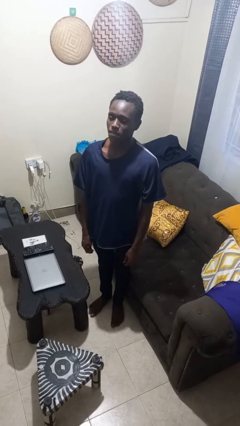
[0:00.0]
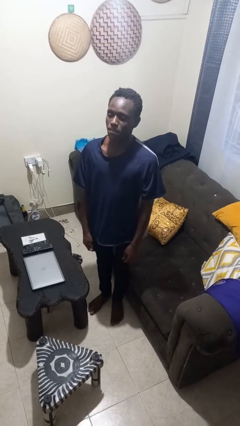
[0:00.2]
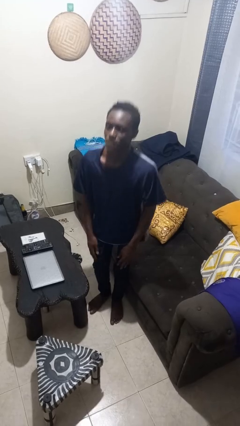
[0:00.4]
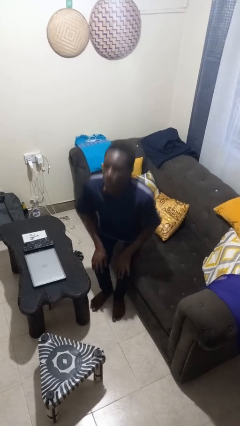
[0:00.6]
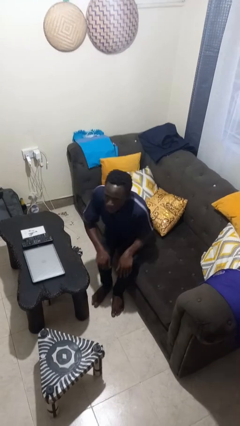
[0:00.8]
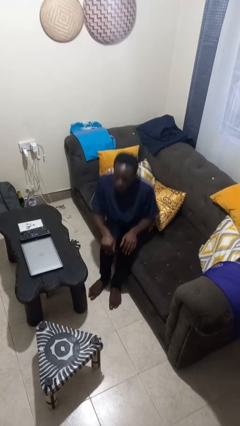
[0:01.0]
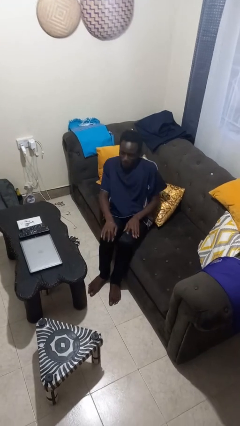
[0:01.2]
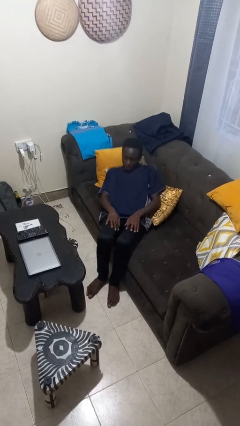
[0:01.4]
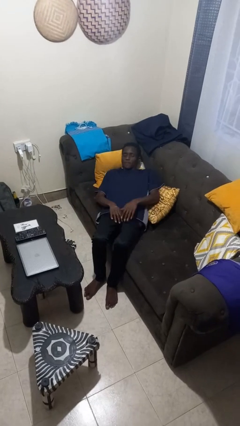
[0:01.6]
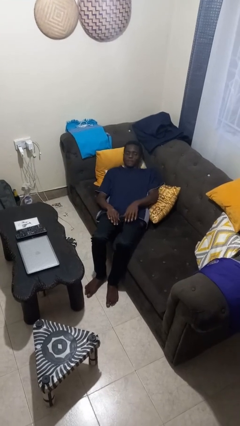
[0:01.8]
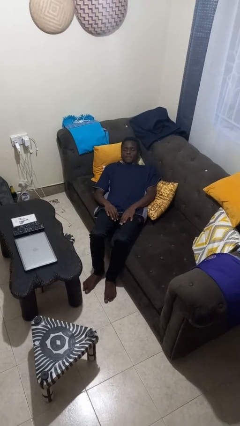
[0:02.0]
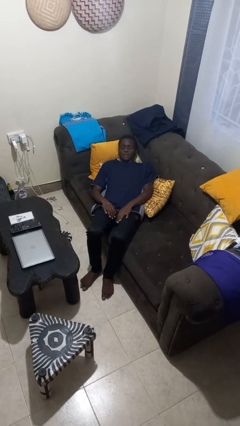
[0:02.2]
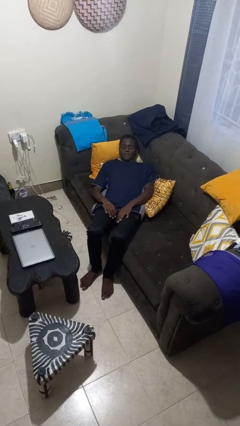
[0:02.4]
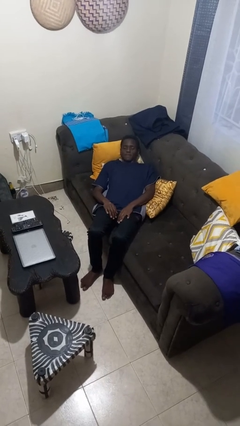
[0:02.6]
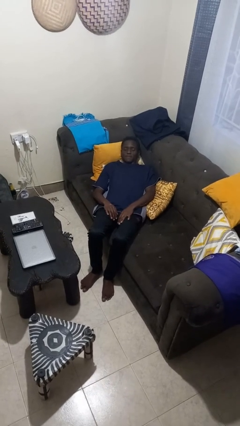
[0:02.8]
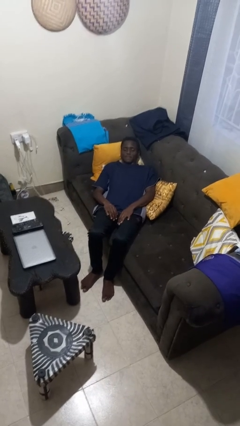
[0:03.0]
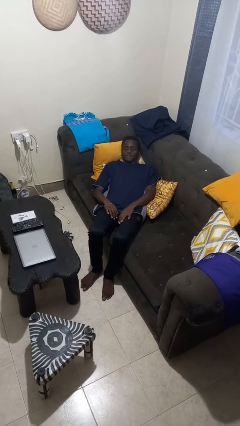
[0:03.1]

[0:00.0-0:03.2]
person lies down on couch

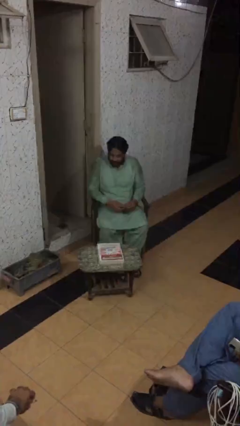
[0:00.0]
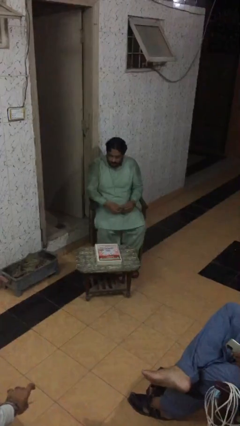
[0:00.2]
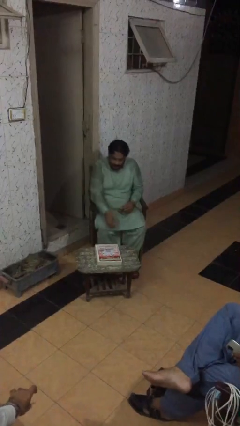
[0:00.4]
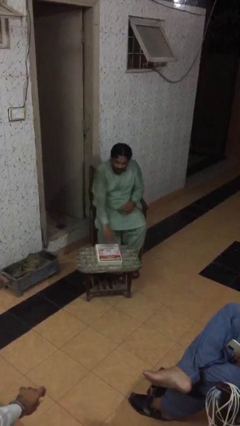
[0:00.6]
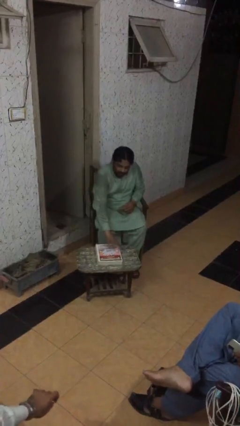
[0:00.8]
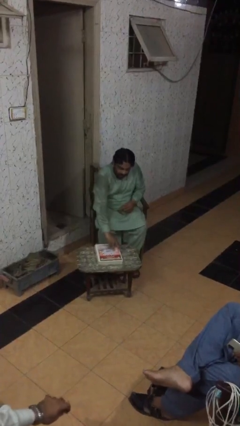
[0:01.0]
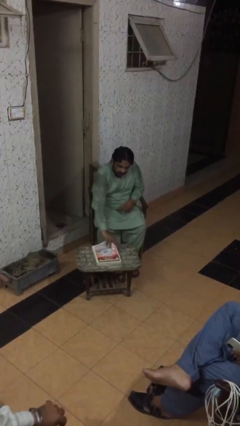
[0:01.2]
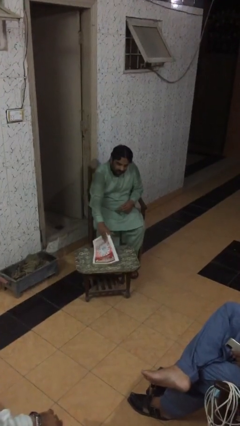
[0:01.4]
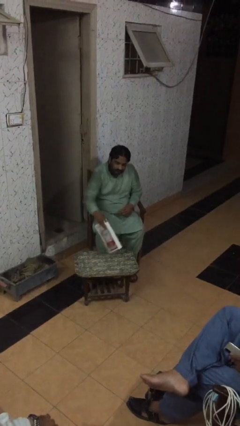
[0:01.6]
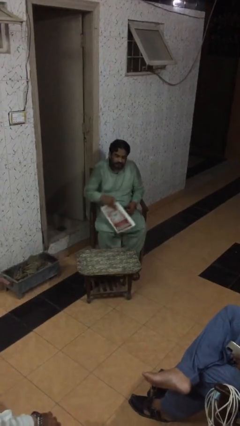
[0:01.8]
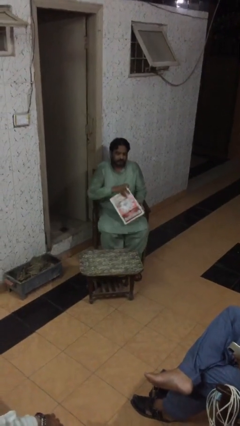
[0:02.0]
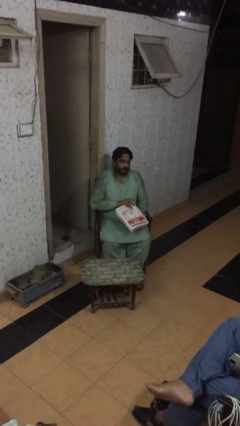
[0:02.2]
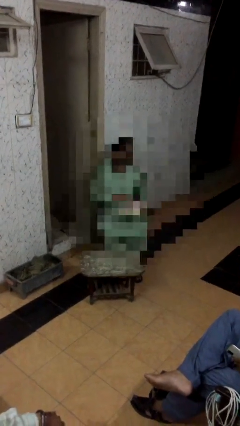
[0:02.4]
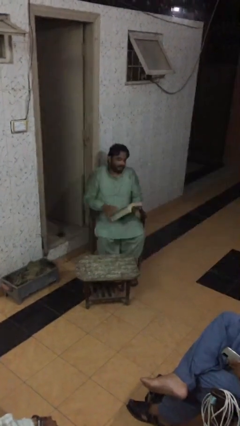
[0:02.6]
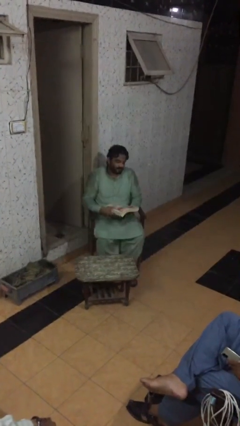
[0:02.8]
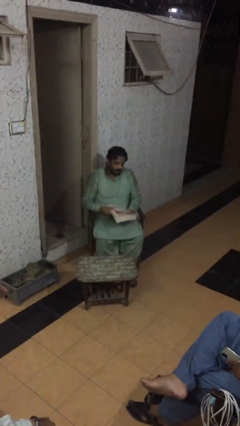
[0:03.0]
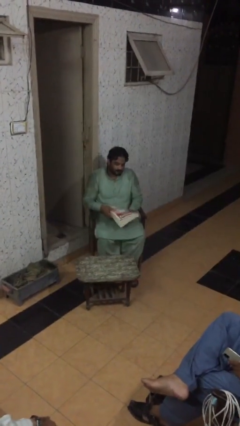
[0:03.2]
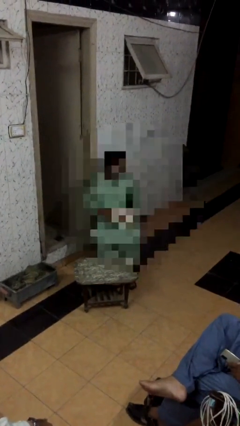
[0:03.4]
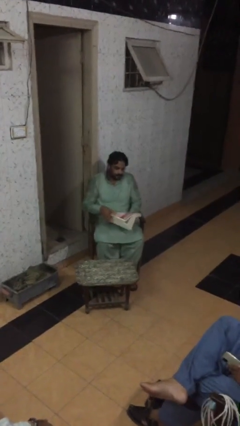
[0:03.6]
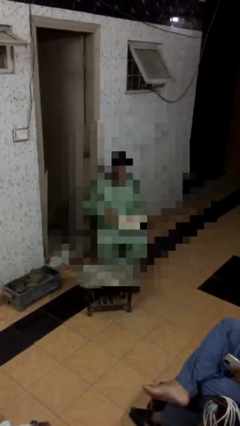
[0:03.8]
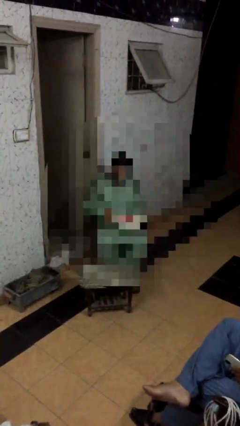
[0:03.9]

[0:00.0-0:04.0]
person picks up object from table

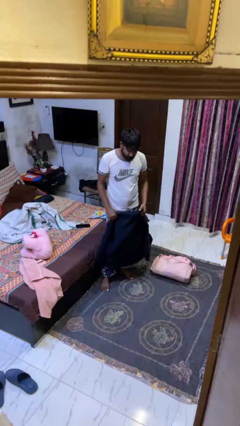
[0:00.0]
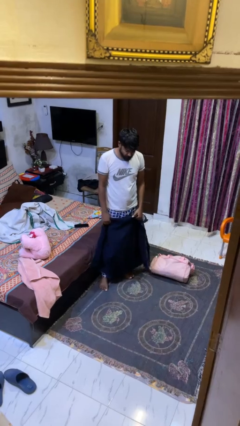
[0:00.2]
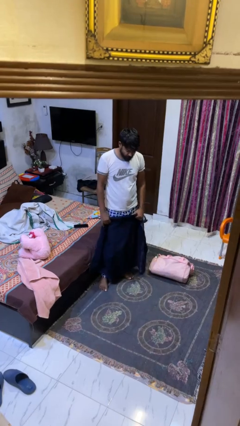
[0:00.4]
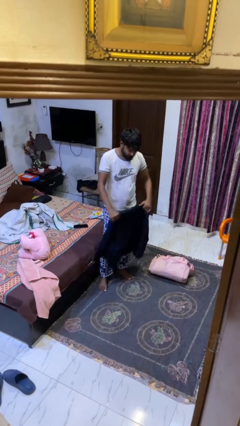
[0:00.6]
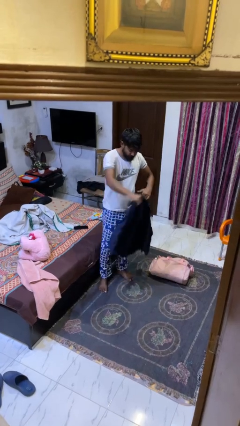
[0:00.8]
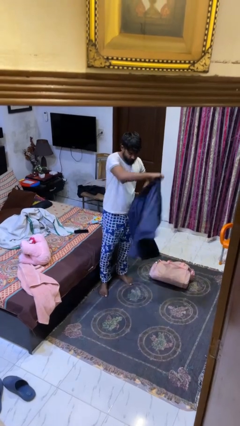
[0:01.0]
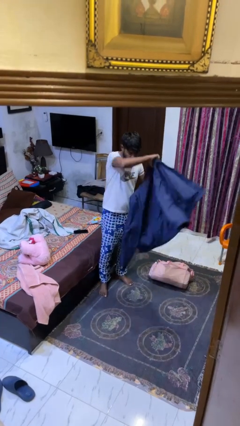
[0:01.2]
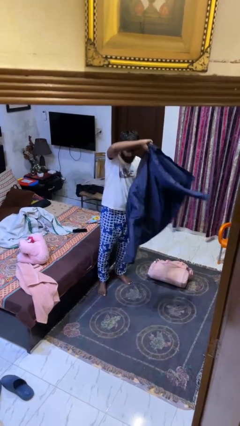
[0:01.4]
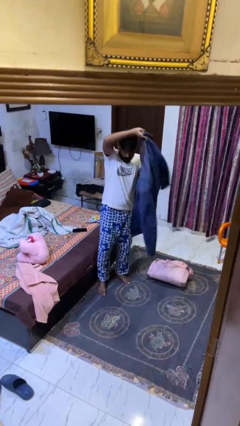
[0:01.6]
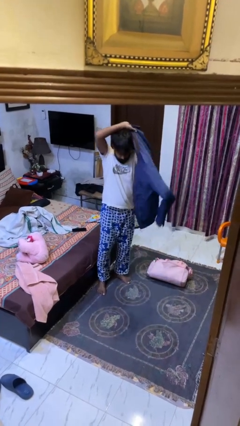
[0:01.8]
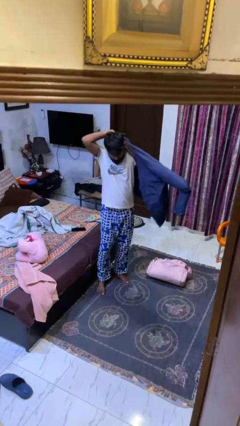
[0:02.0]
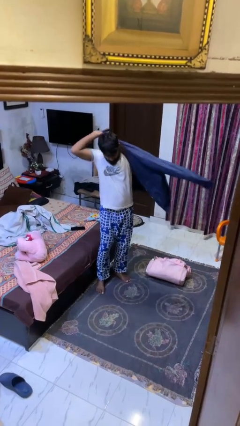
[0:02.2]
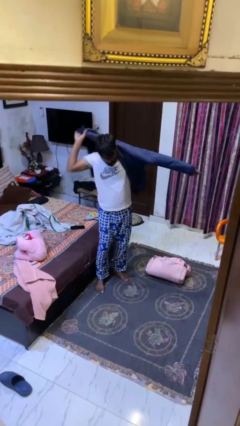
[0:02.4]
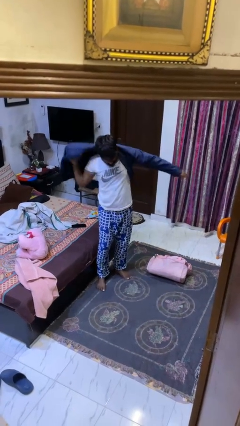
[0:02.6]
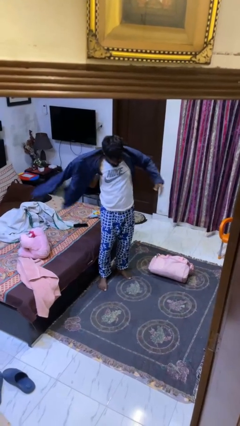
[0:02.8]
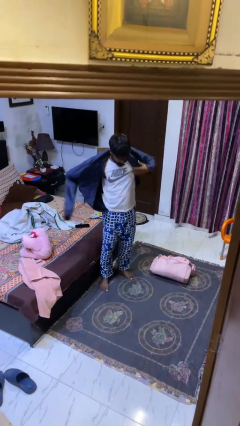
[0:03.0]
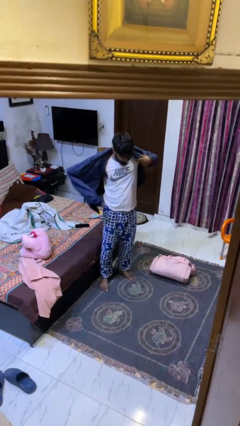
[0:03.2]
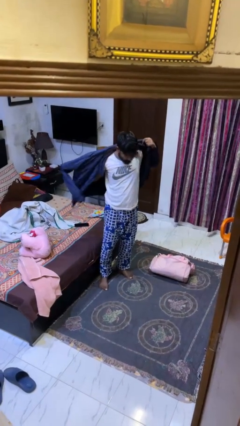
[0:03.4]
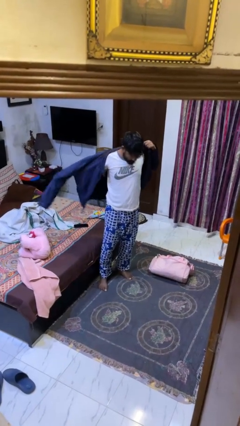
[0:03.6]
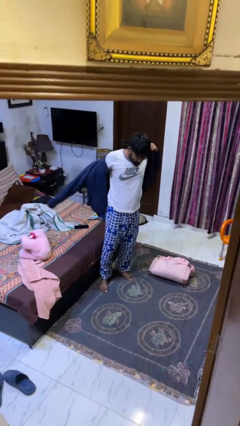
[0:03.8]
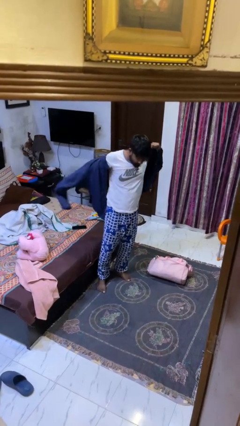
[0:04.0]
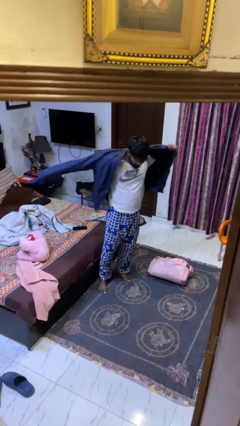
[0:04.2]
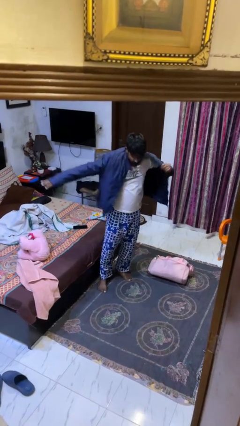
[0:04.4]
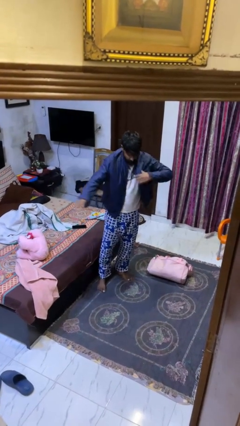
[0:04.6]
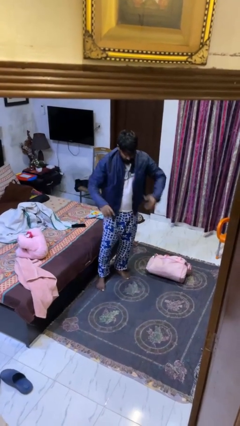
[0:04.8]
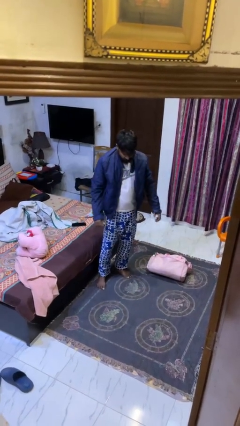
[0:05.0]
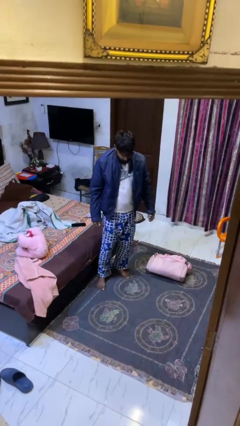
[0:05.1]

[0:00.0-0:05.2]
person puts on jacket

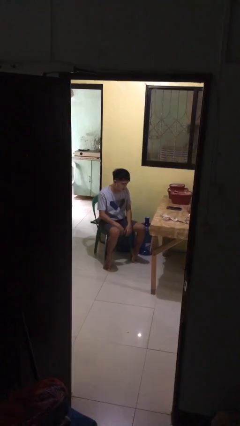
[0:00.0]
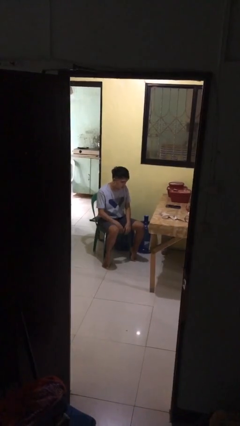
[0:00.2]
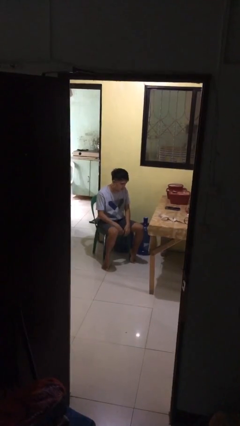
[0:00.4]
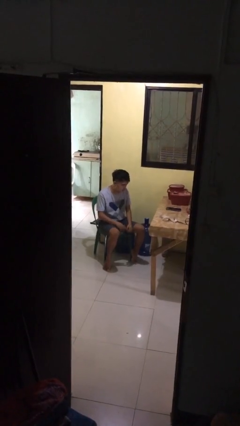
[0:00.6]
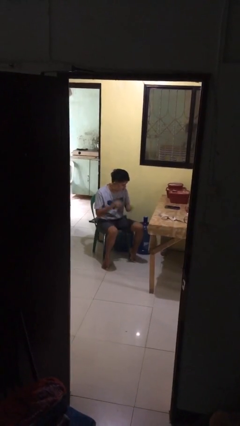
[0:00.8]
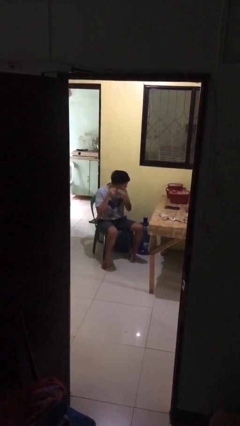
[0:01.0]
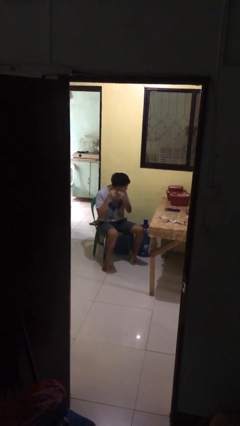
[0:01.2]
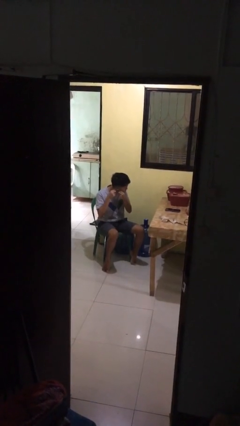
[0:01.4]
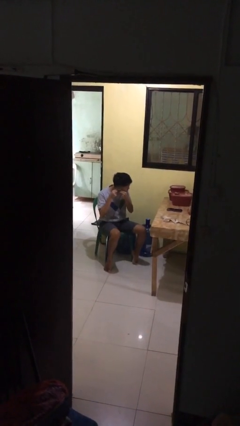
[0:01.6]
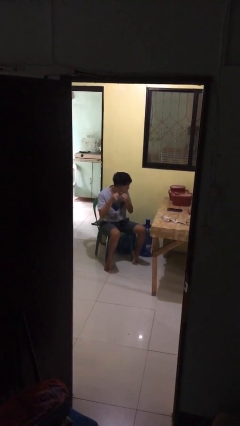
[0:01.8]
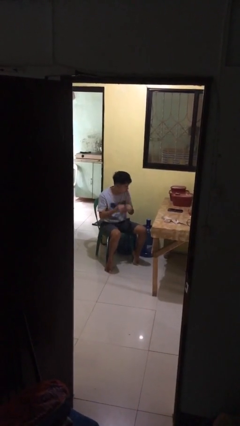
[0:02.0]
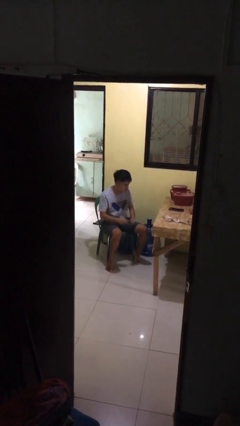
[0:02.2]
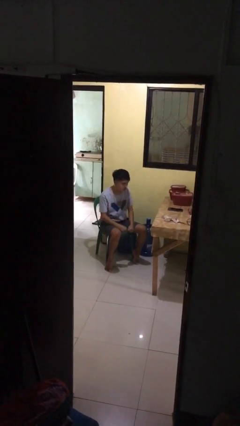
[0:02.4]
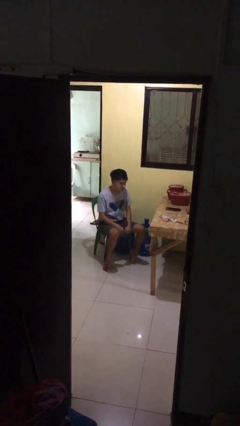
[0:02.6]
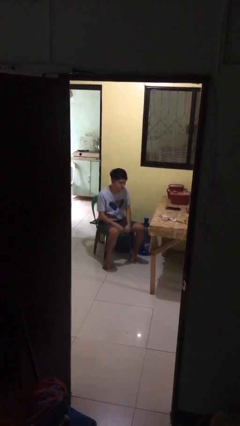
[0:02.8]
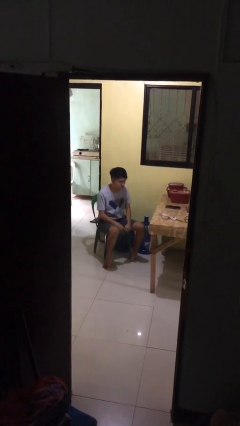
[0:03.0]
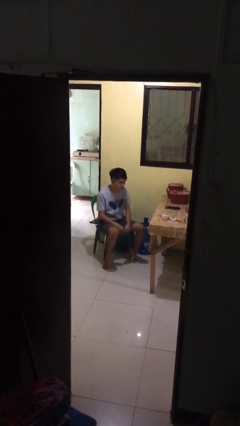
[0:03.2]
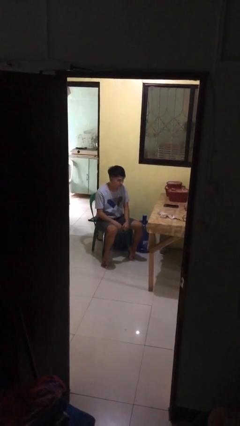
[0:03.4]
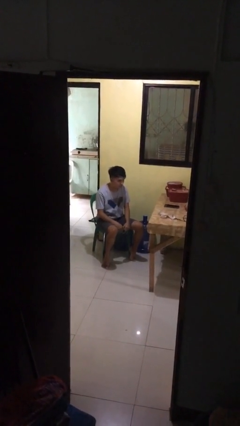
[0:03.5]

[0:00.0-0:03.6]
person takes off earrings

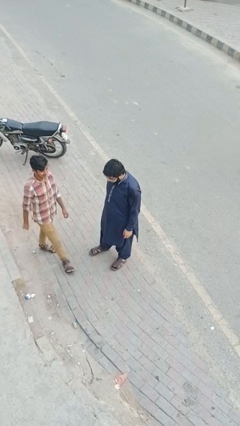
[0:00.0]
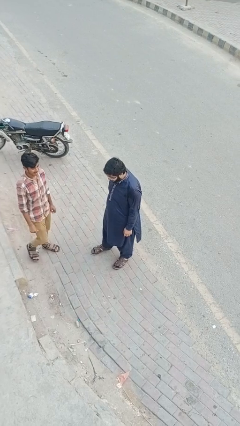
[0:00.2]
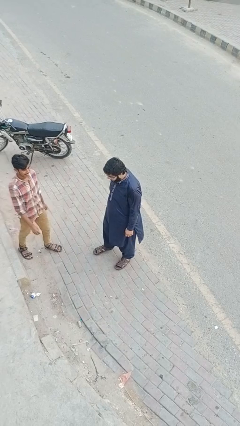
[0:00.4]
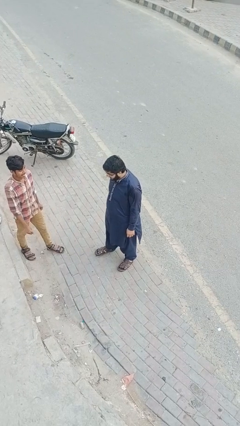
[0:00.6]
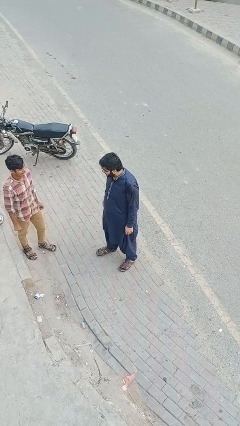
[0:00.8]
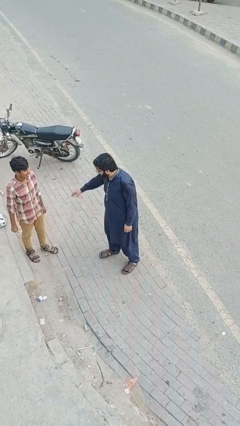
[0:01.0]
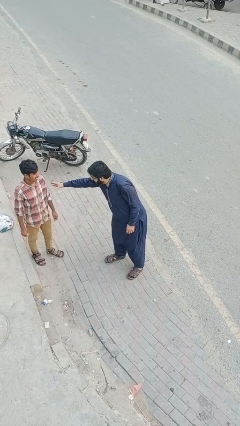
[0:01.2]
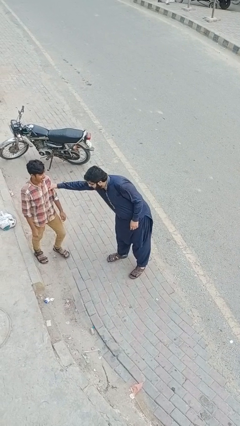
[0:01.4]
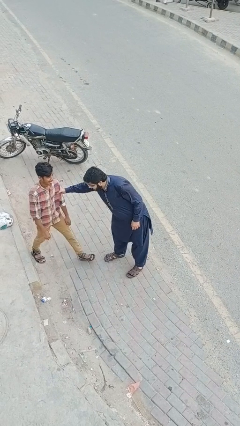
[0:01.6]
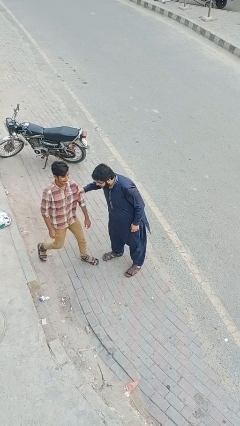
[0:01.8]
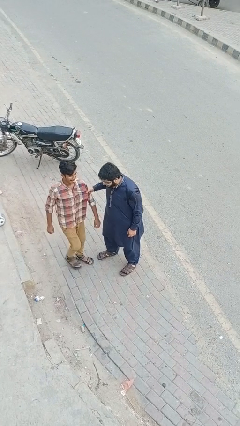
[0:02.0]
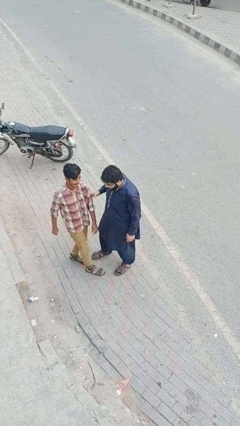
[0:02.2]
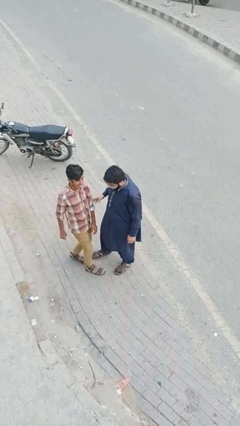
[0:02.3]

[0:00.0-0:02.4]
person grabs person by bicep
